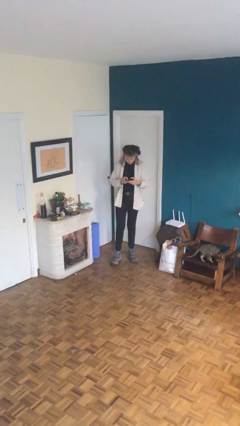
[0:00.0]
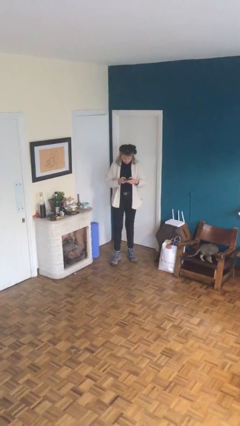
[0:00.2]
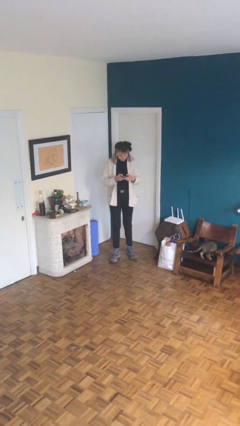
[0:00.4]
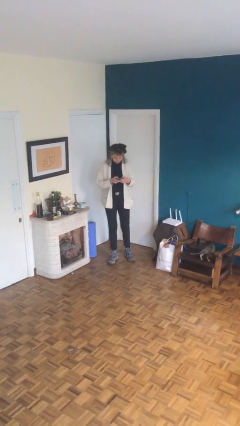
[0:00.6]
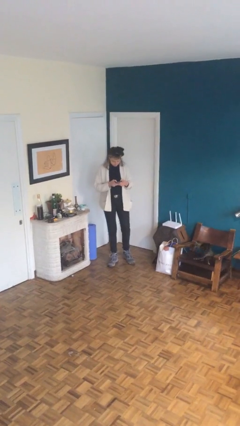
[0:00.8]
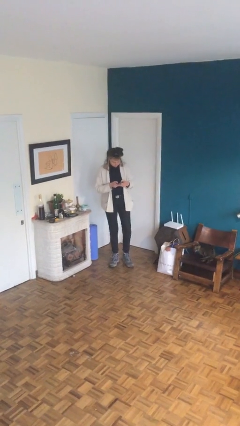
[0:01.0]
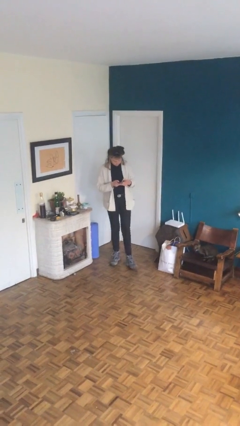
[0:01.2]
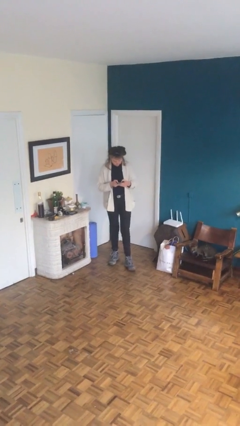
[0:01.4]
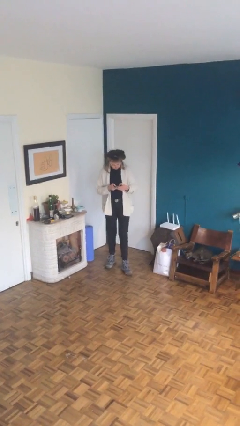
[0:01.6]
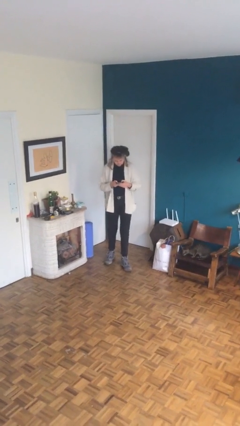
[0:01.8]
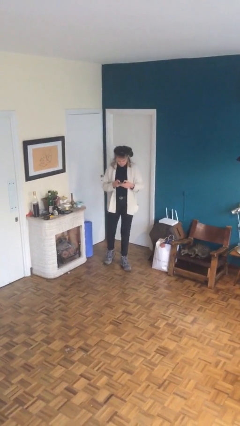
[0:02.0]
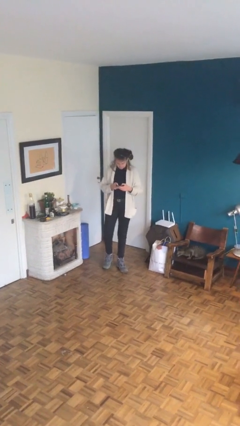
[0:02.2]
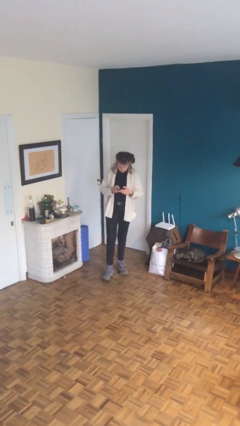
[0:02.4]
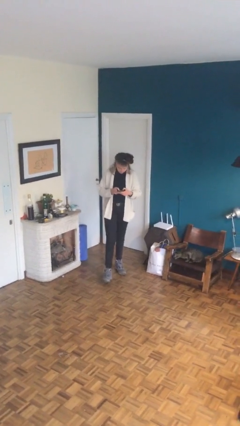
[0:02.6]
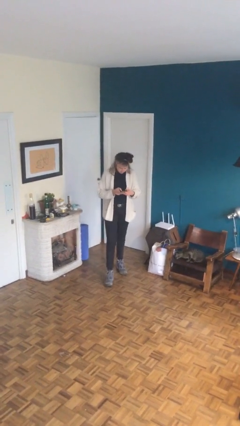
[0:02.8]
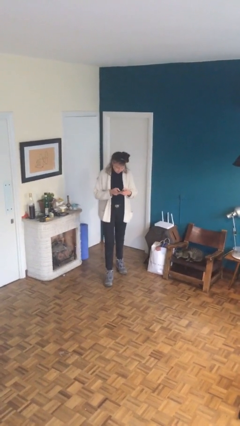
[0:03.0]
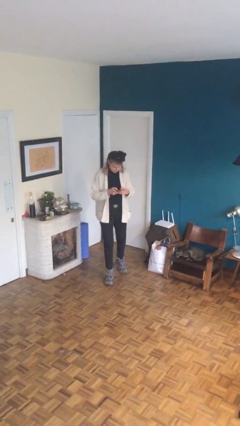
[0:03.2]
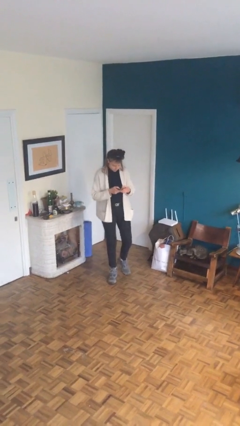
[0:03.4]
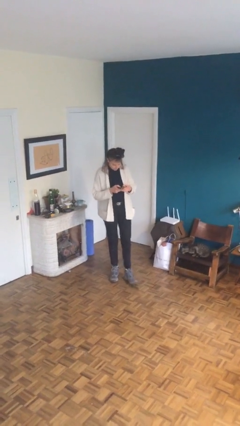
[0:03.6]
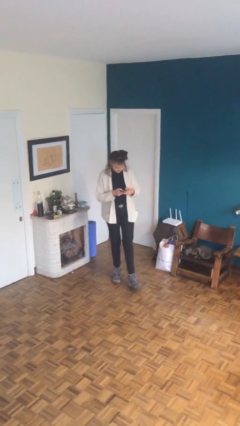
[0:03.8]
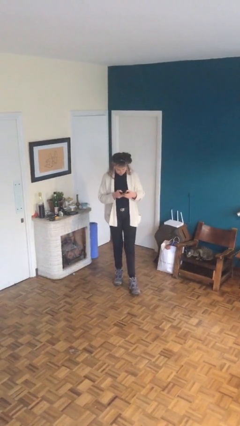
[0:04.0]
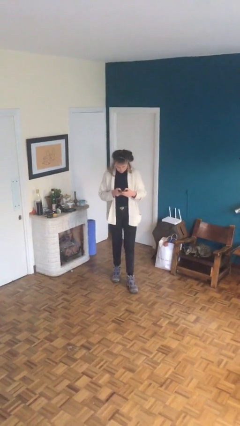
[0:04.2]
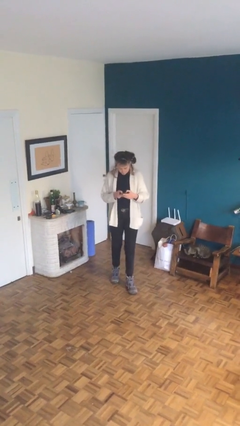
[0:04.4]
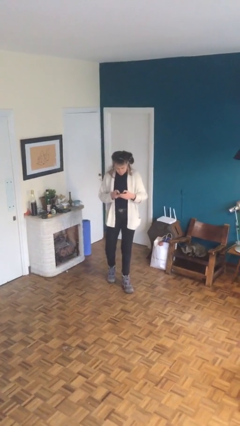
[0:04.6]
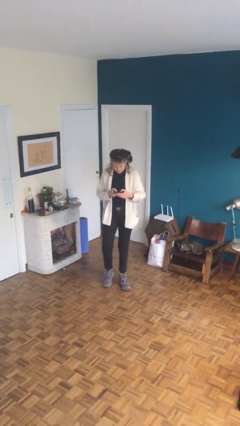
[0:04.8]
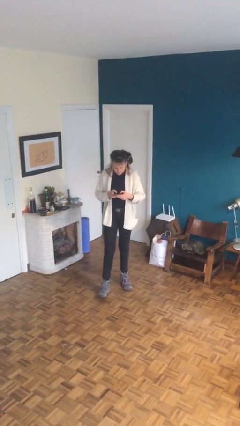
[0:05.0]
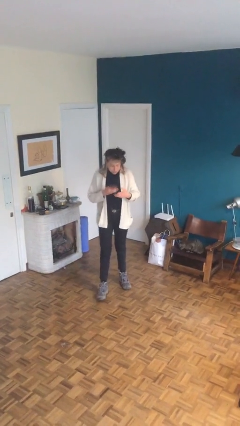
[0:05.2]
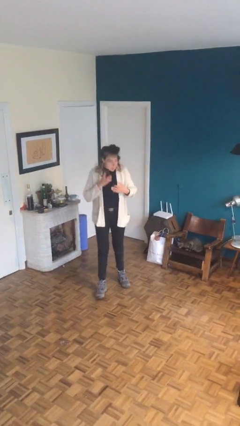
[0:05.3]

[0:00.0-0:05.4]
person texts on phone

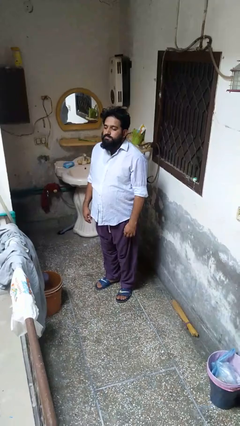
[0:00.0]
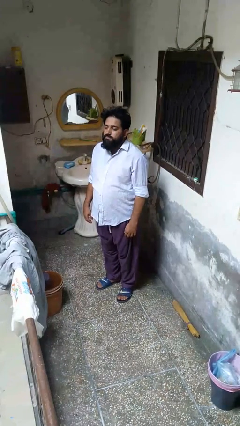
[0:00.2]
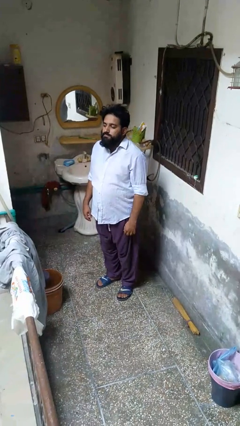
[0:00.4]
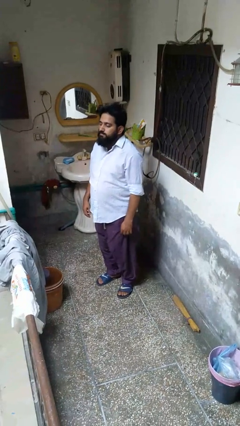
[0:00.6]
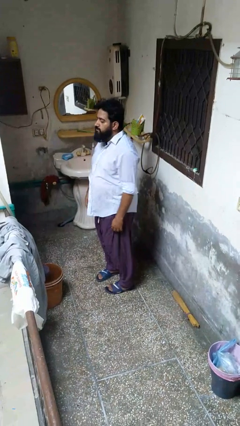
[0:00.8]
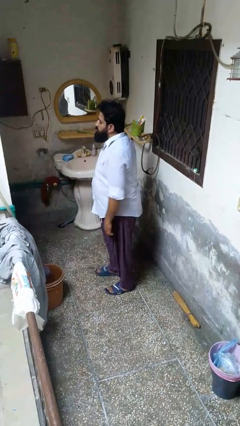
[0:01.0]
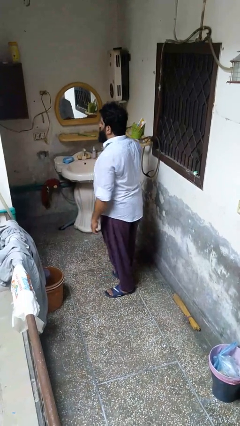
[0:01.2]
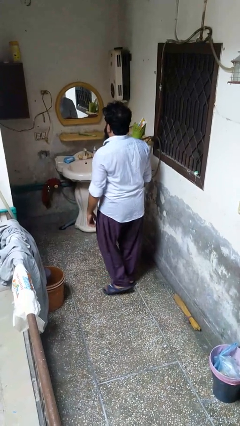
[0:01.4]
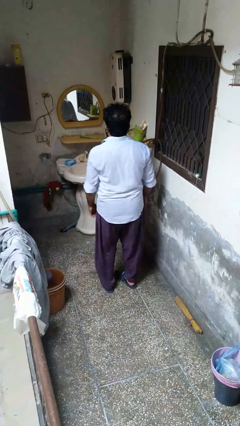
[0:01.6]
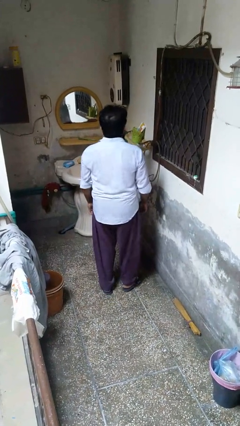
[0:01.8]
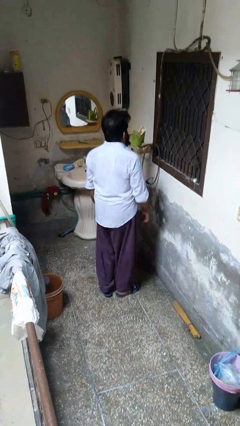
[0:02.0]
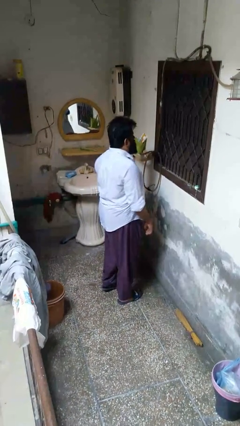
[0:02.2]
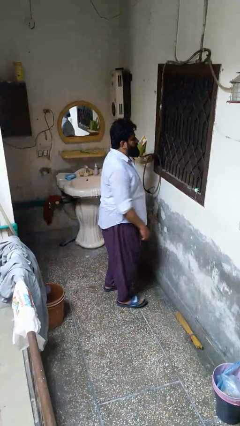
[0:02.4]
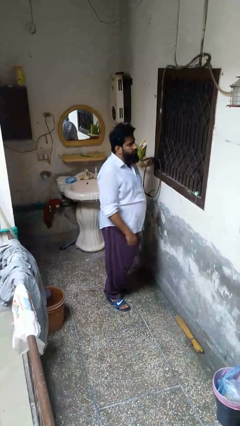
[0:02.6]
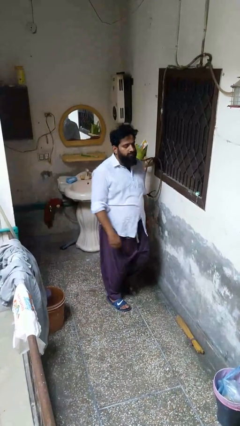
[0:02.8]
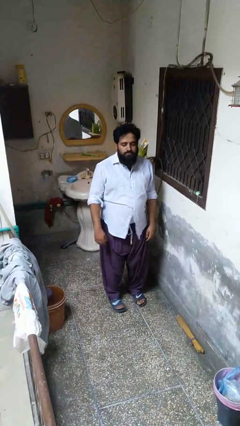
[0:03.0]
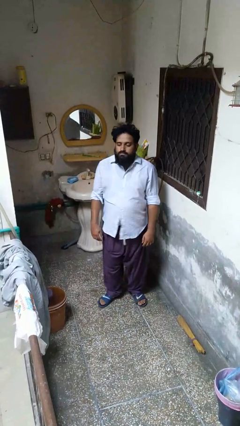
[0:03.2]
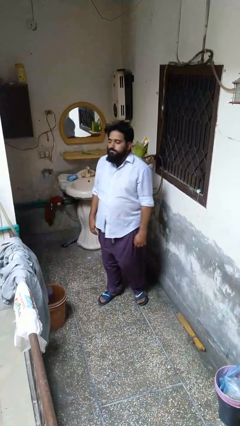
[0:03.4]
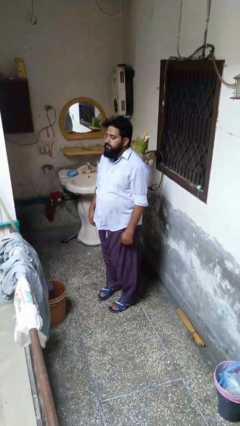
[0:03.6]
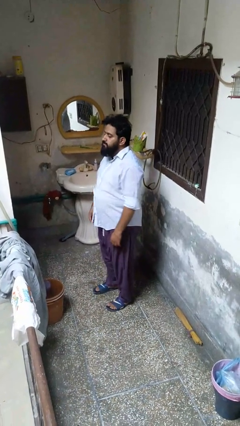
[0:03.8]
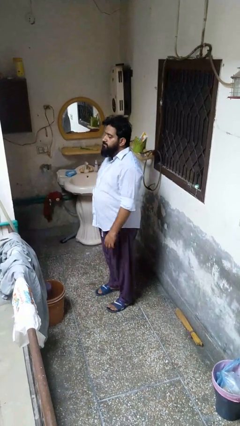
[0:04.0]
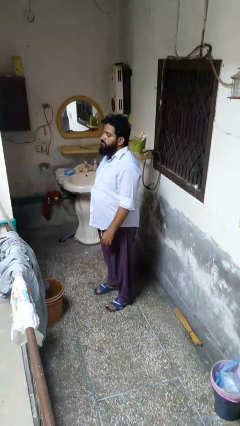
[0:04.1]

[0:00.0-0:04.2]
person twirls

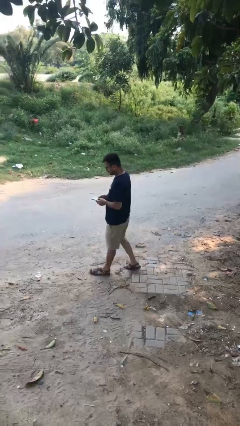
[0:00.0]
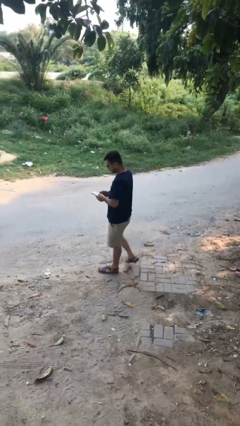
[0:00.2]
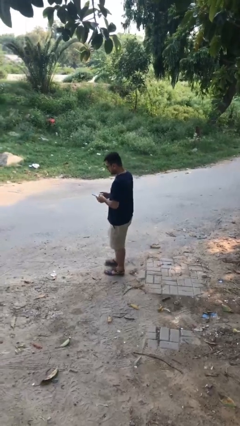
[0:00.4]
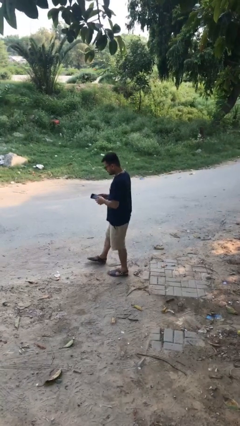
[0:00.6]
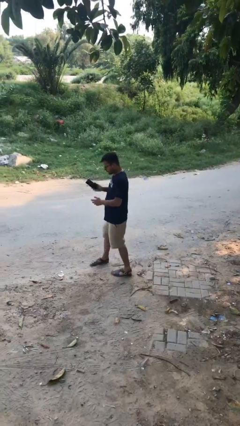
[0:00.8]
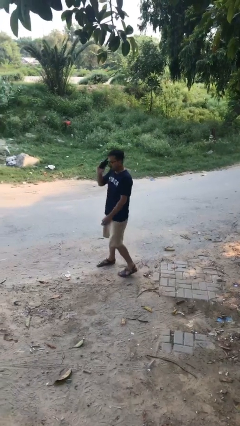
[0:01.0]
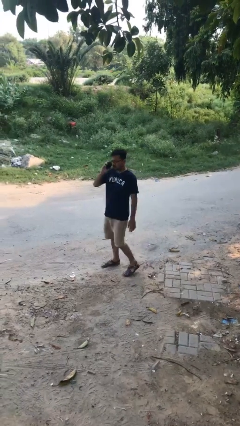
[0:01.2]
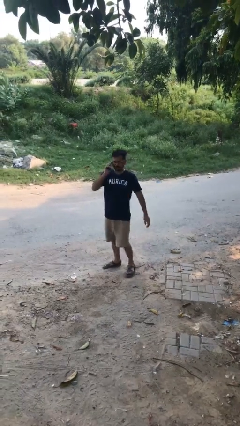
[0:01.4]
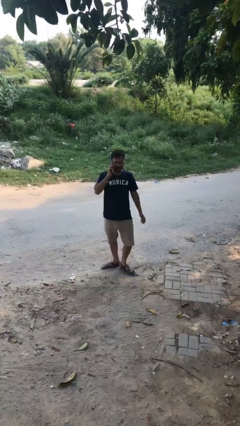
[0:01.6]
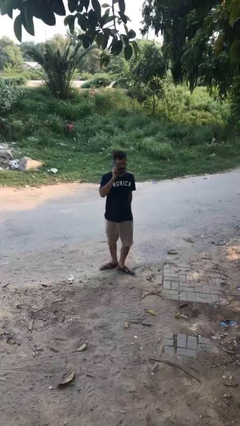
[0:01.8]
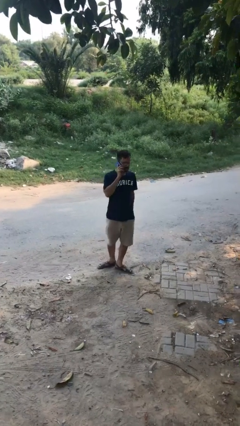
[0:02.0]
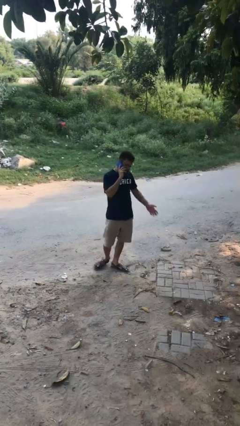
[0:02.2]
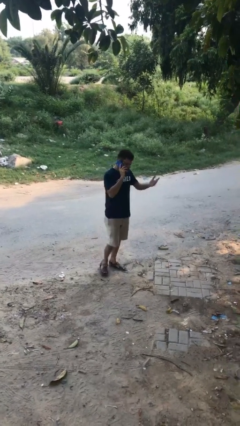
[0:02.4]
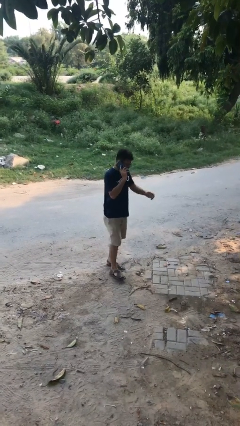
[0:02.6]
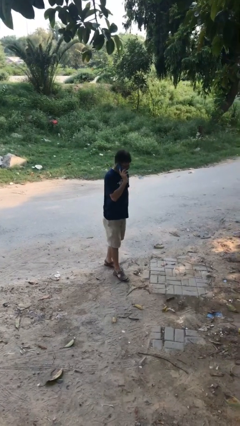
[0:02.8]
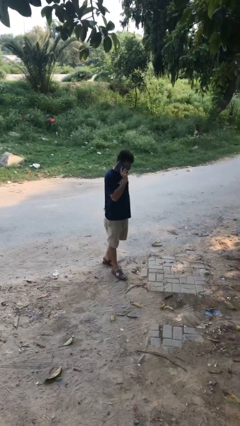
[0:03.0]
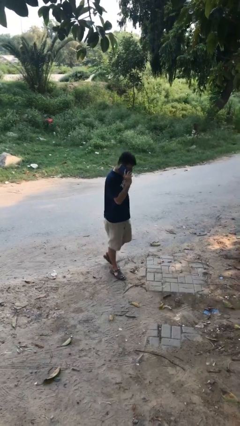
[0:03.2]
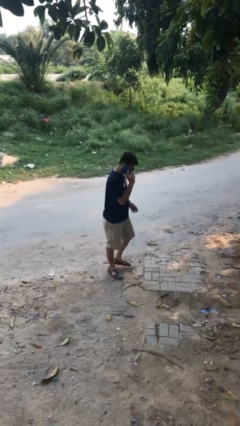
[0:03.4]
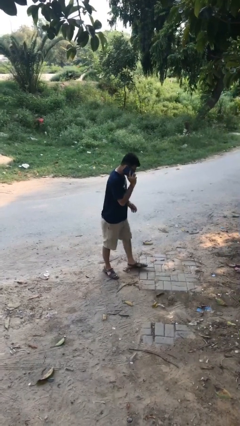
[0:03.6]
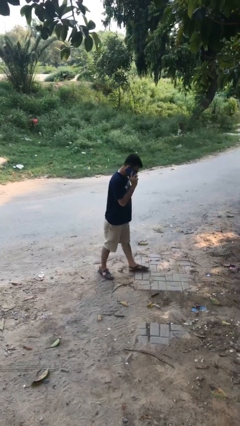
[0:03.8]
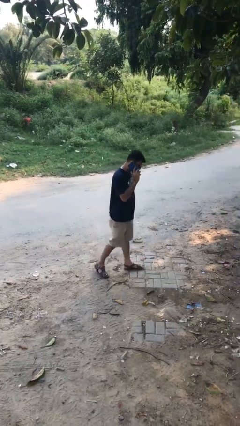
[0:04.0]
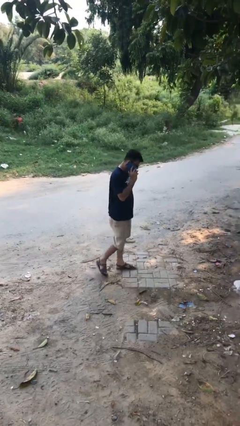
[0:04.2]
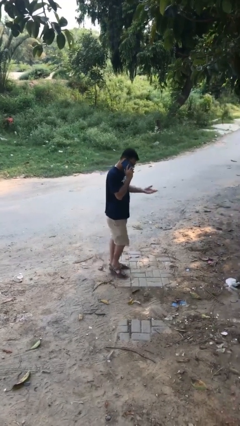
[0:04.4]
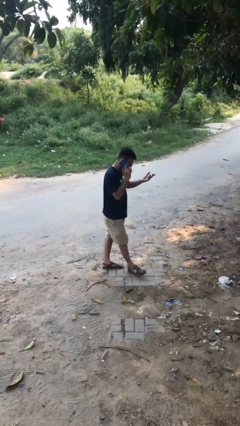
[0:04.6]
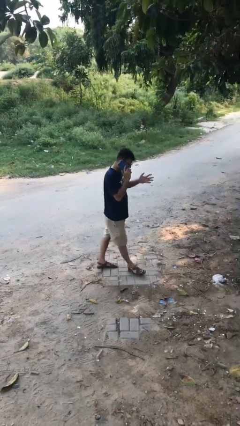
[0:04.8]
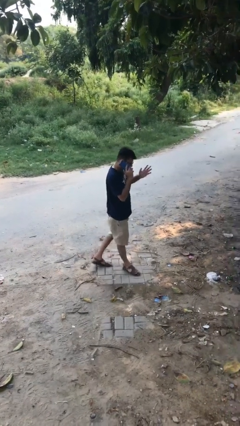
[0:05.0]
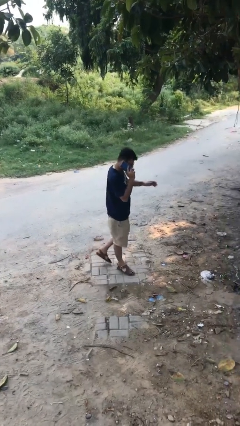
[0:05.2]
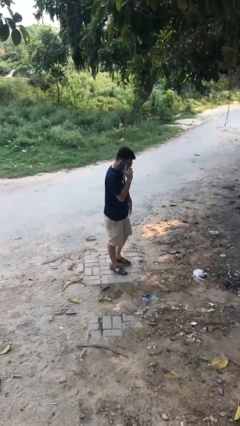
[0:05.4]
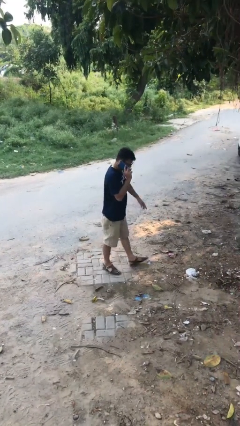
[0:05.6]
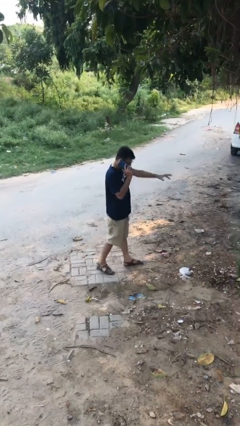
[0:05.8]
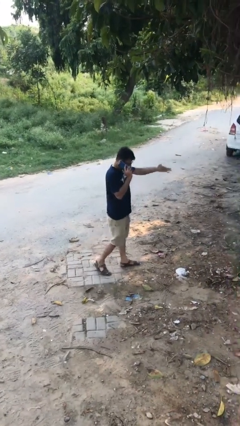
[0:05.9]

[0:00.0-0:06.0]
person talks on phone

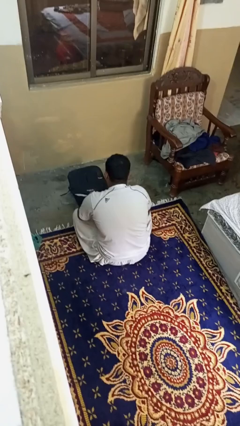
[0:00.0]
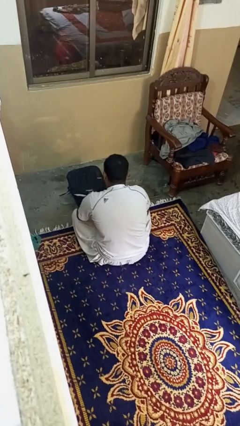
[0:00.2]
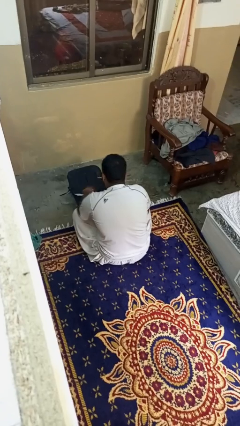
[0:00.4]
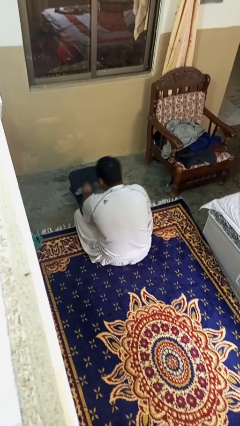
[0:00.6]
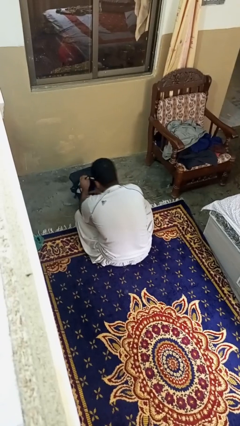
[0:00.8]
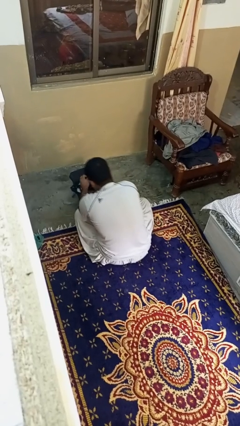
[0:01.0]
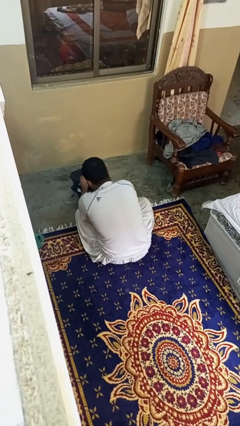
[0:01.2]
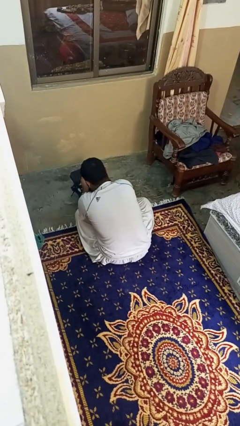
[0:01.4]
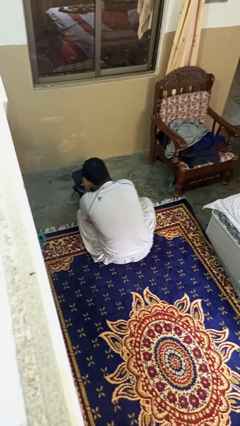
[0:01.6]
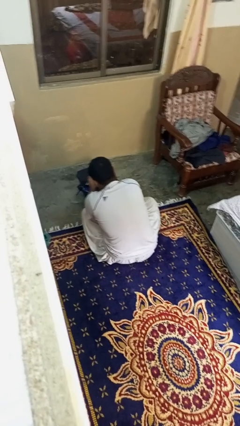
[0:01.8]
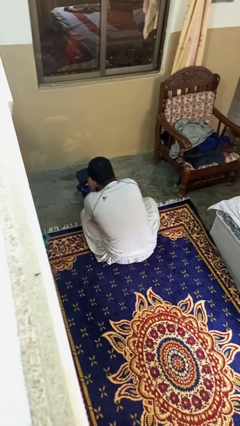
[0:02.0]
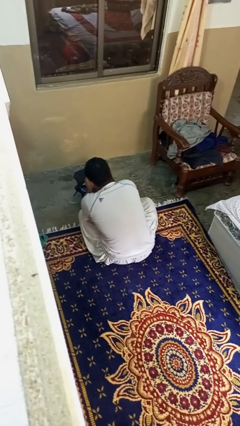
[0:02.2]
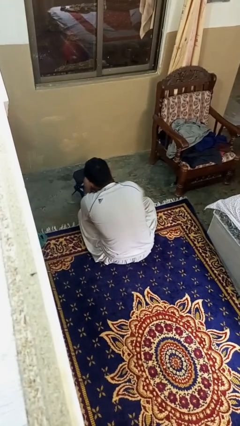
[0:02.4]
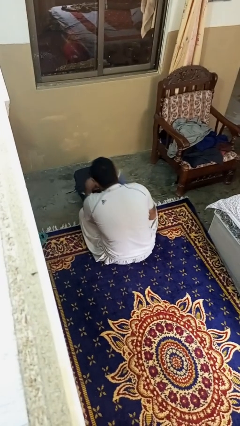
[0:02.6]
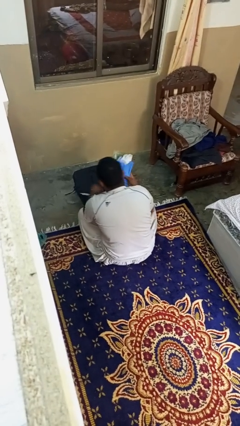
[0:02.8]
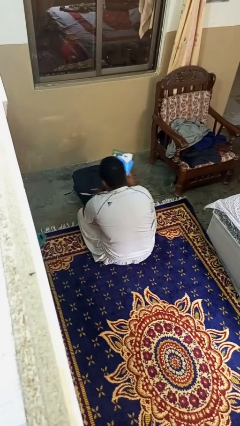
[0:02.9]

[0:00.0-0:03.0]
person takes object from bag
